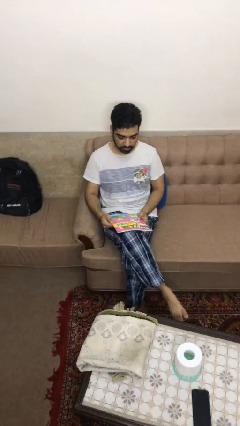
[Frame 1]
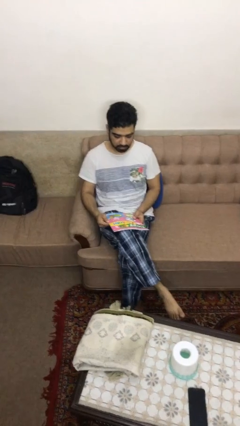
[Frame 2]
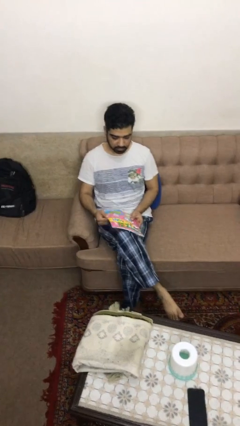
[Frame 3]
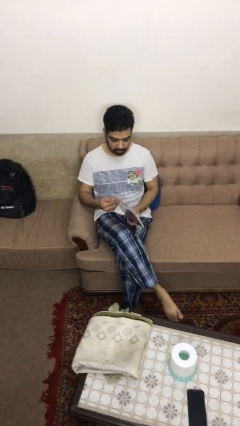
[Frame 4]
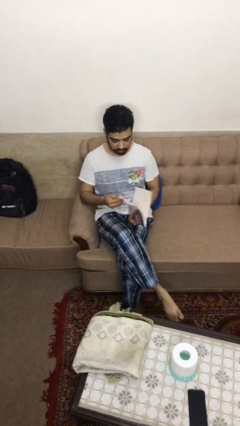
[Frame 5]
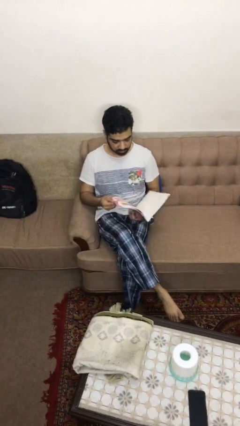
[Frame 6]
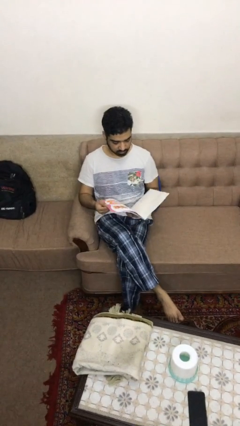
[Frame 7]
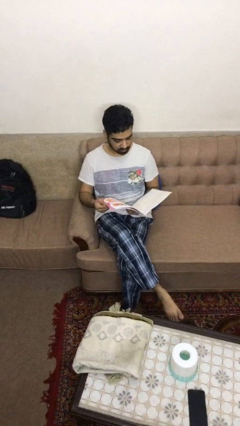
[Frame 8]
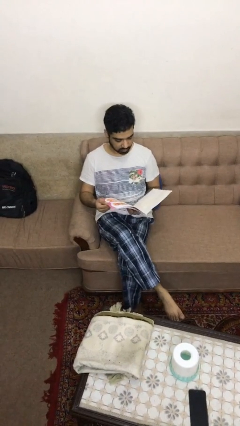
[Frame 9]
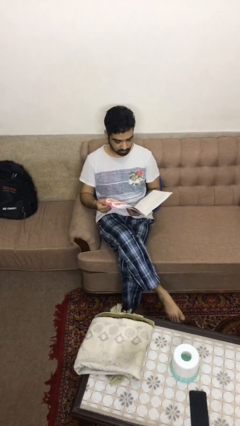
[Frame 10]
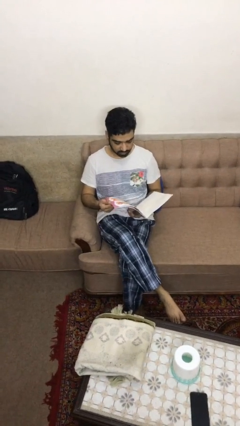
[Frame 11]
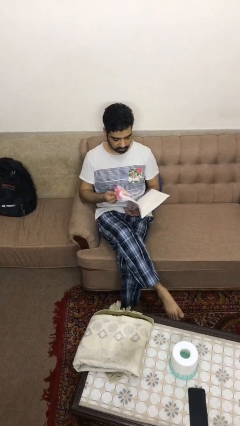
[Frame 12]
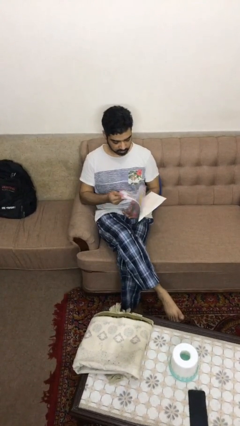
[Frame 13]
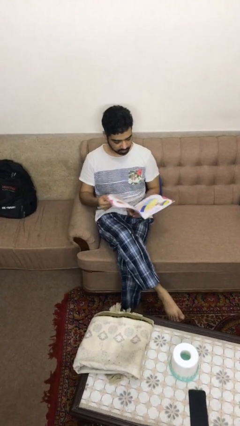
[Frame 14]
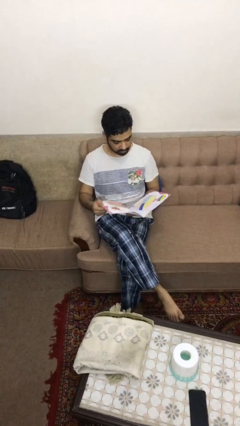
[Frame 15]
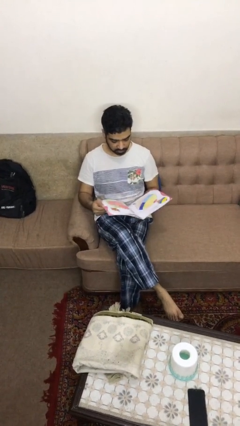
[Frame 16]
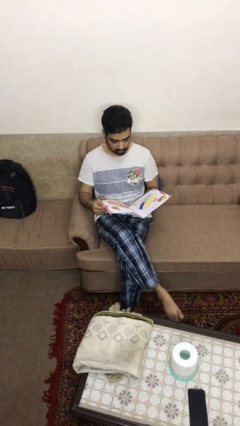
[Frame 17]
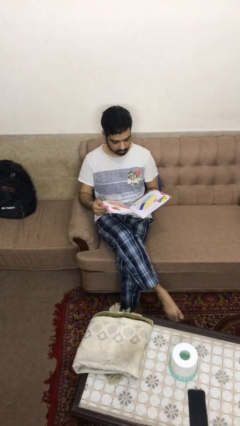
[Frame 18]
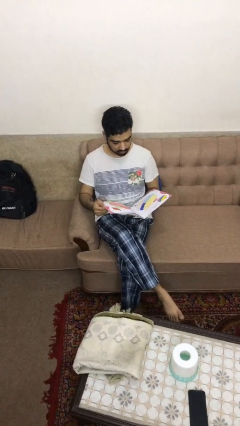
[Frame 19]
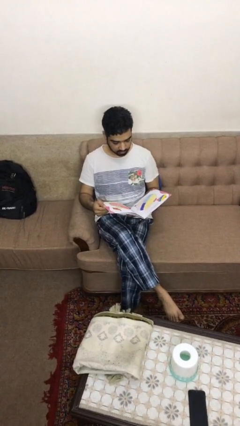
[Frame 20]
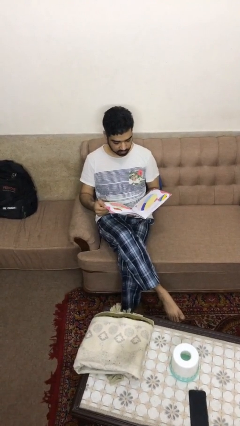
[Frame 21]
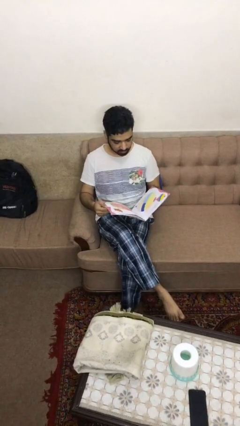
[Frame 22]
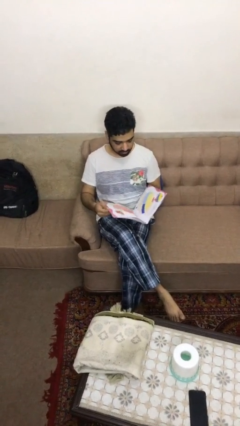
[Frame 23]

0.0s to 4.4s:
person reads magazine

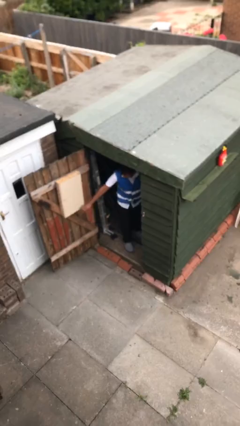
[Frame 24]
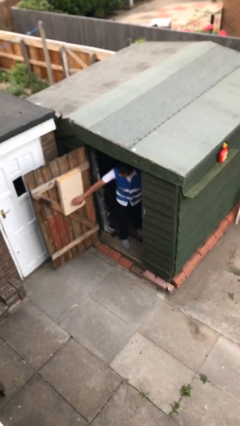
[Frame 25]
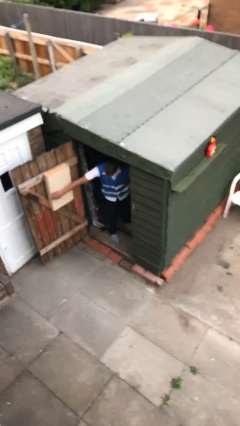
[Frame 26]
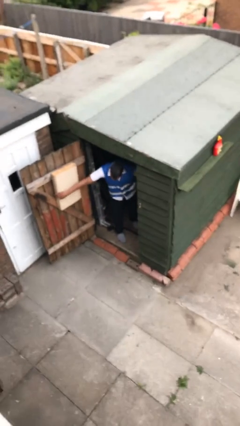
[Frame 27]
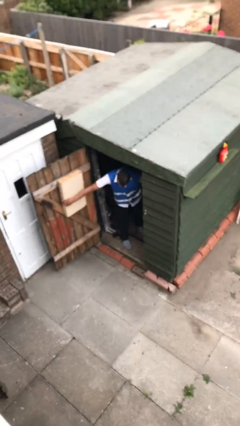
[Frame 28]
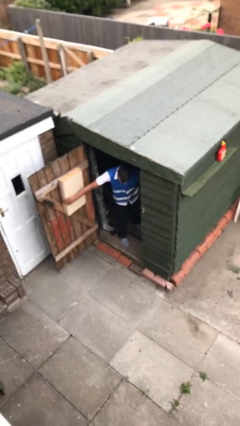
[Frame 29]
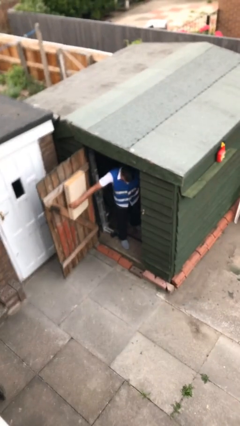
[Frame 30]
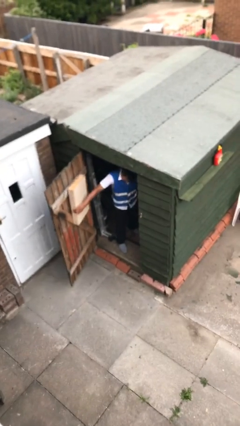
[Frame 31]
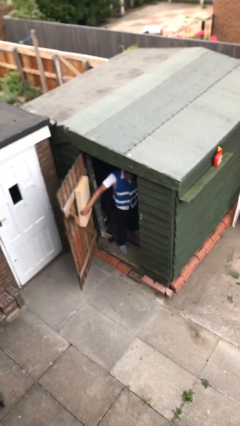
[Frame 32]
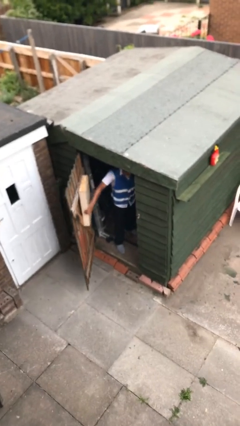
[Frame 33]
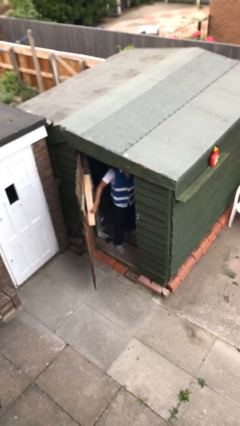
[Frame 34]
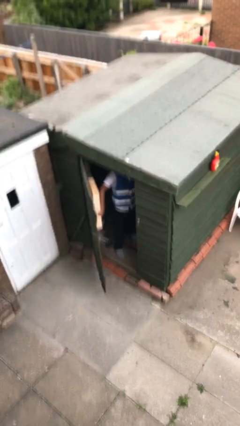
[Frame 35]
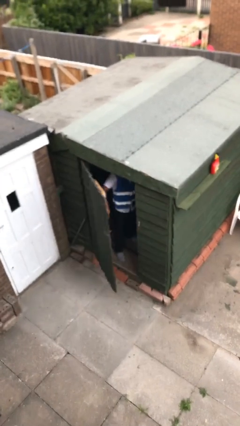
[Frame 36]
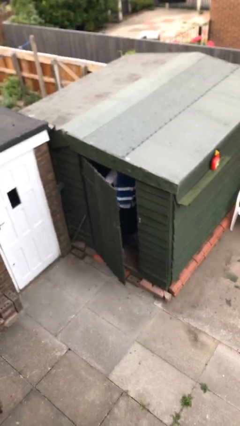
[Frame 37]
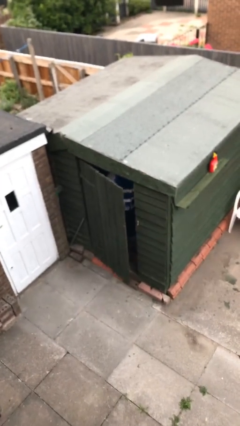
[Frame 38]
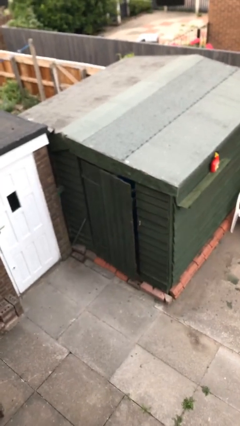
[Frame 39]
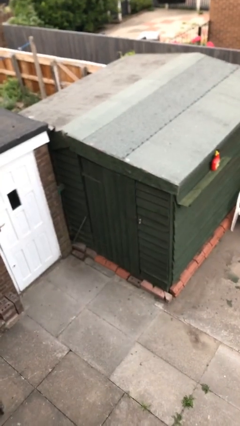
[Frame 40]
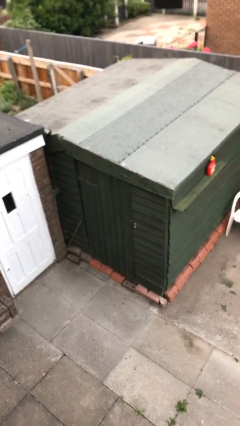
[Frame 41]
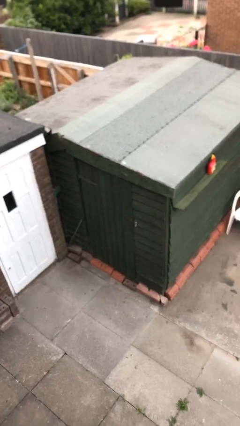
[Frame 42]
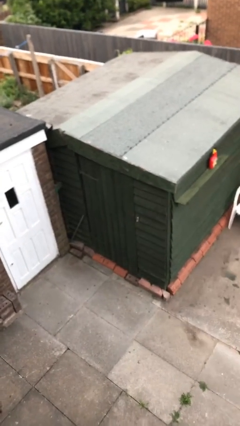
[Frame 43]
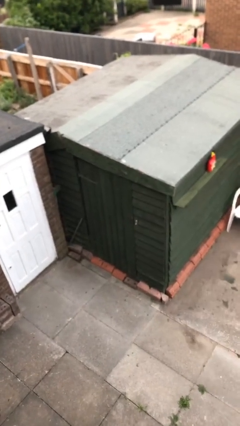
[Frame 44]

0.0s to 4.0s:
person closes facility door

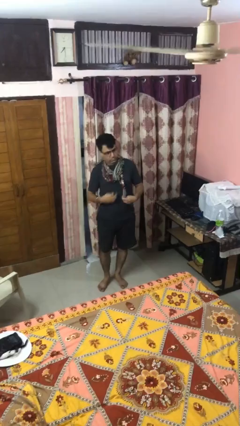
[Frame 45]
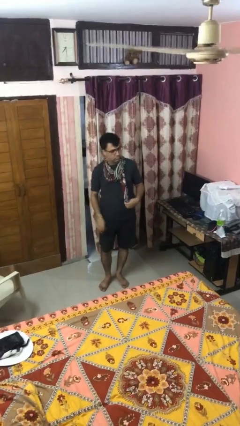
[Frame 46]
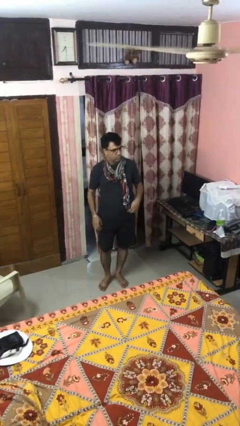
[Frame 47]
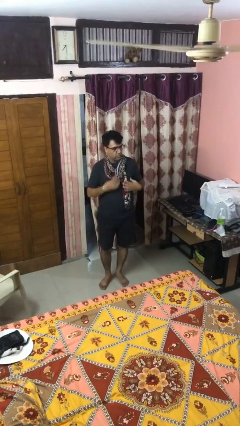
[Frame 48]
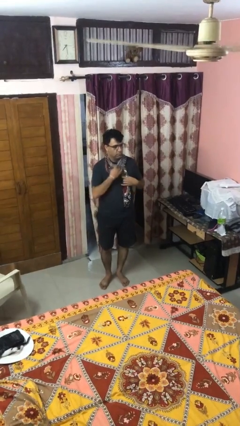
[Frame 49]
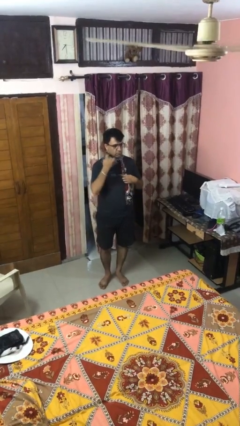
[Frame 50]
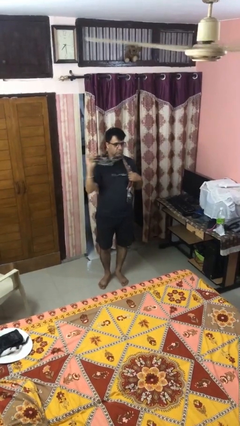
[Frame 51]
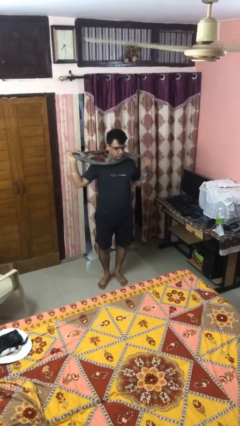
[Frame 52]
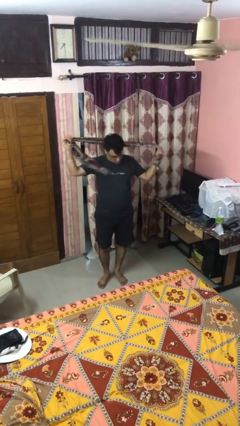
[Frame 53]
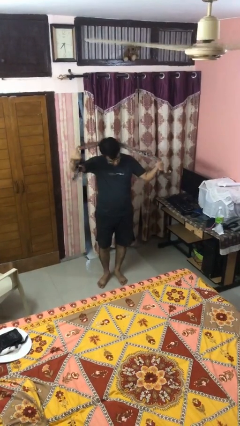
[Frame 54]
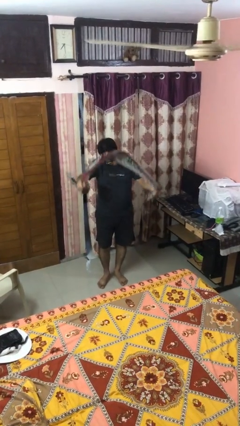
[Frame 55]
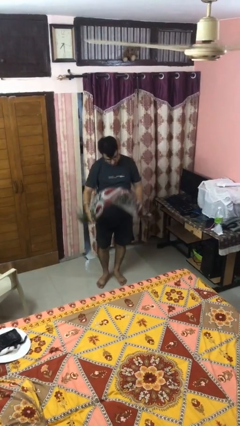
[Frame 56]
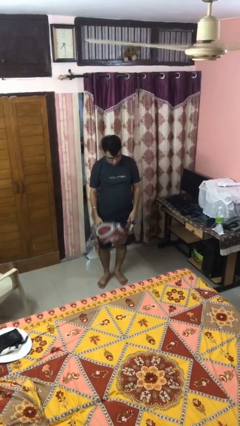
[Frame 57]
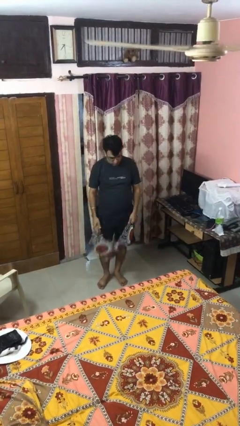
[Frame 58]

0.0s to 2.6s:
person takes off scarf

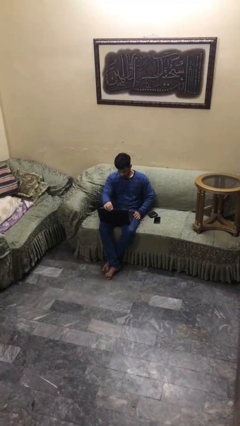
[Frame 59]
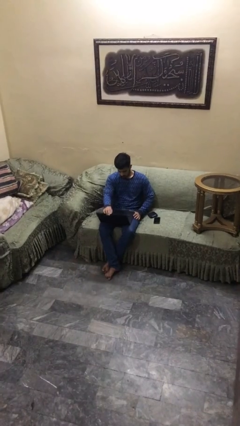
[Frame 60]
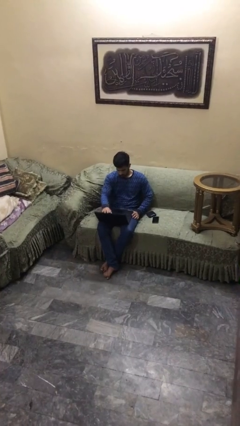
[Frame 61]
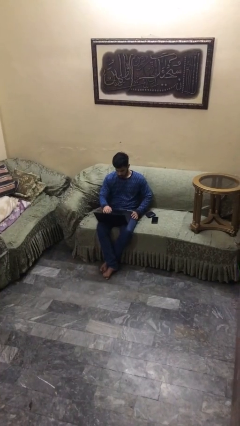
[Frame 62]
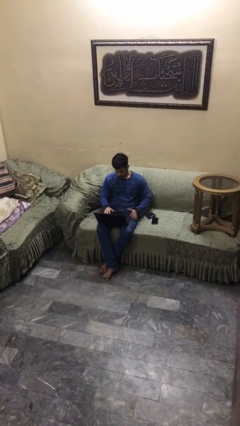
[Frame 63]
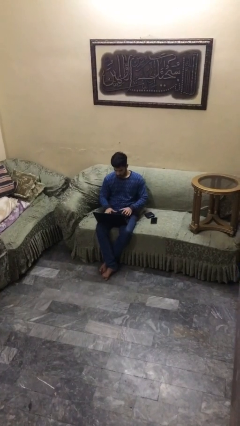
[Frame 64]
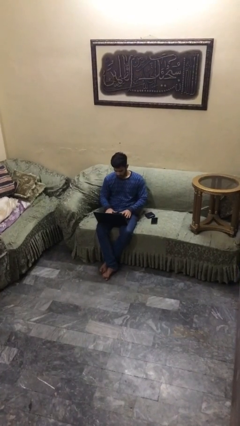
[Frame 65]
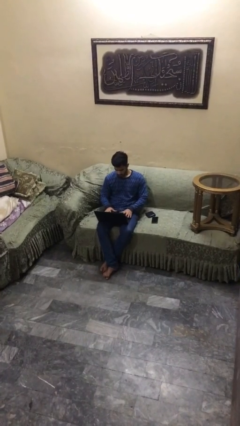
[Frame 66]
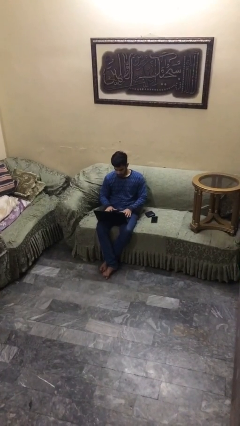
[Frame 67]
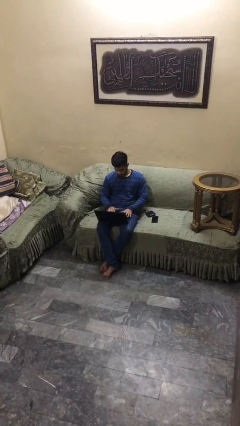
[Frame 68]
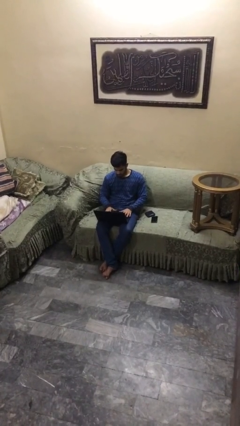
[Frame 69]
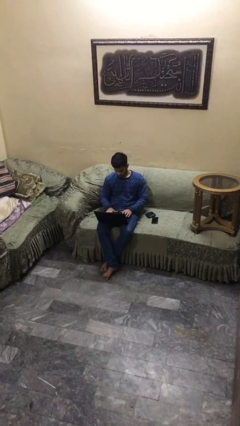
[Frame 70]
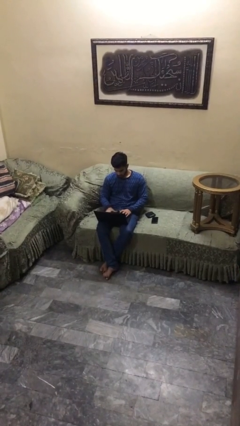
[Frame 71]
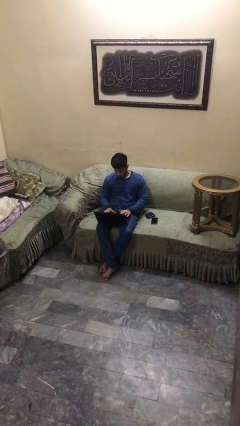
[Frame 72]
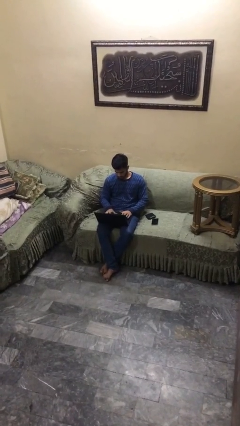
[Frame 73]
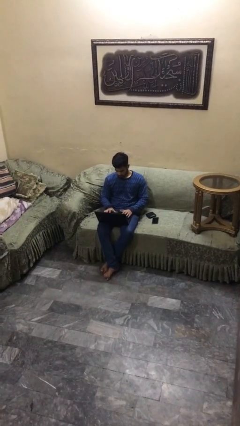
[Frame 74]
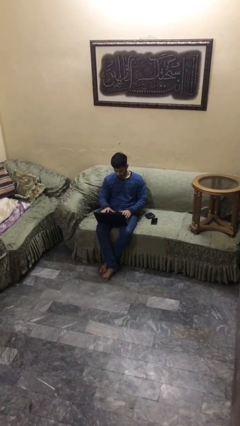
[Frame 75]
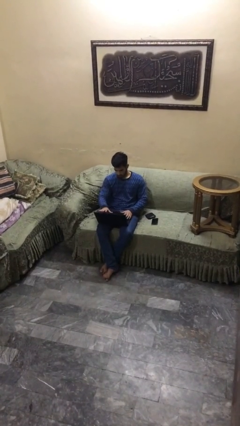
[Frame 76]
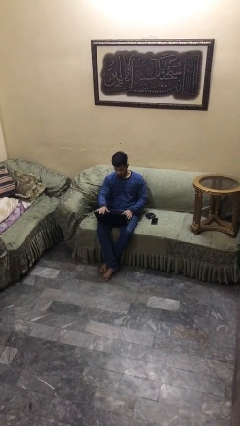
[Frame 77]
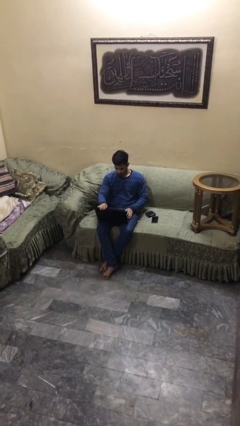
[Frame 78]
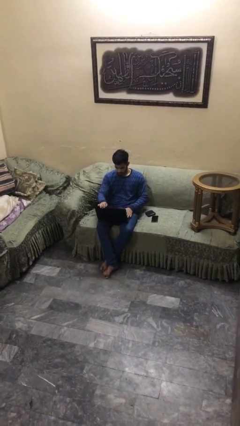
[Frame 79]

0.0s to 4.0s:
person interacts with laptop

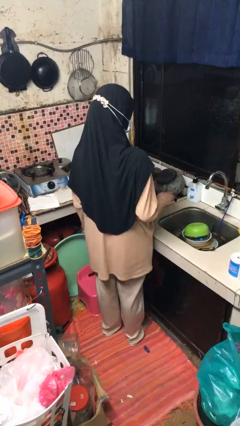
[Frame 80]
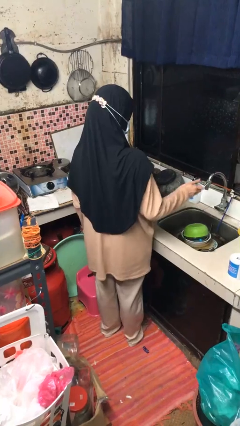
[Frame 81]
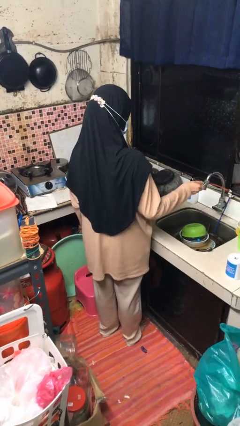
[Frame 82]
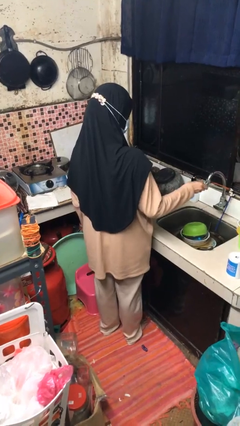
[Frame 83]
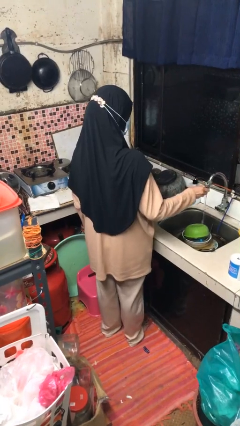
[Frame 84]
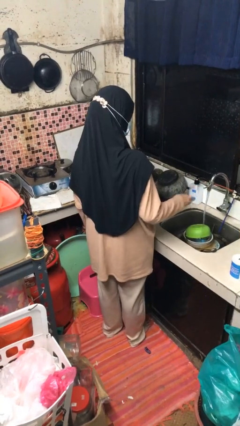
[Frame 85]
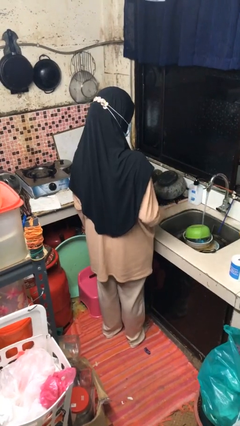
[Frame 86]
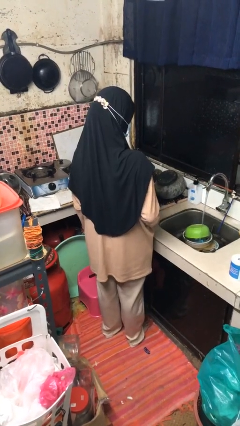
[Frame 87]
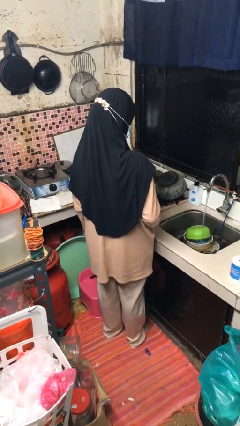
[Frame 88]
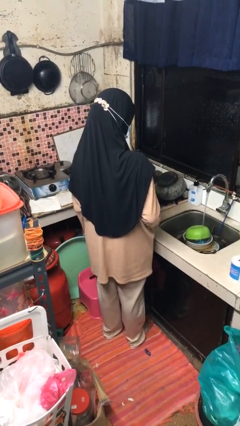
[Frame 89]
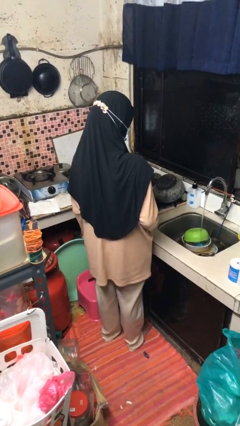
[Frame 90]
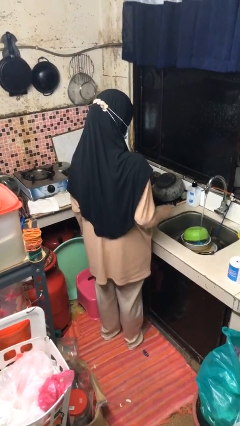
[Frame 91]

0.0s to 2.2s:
person turns on faucet
